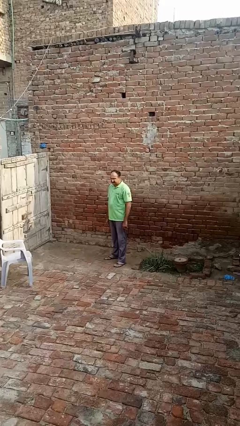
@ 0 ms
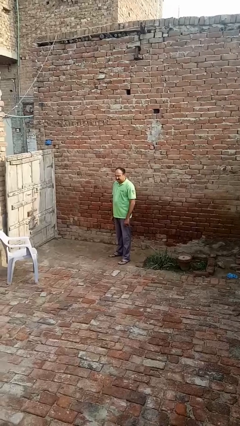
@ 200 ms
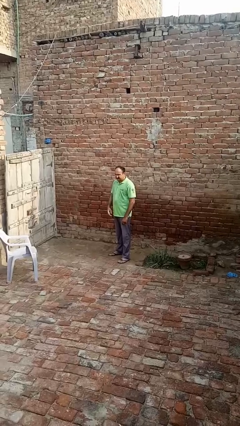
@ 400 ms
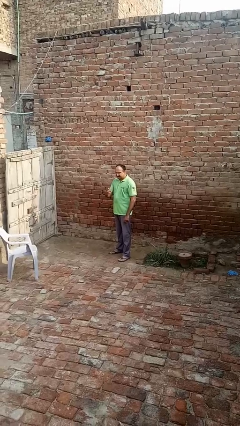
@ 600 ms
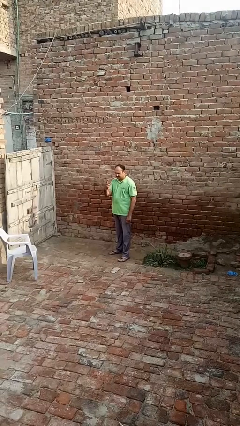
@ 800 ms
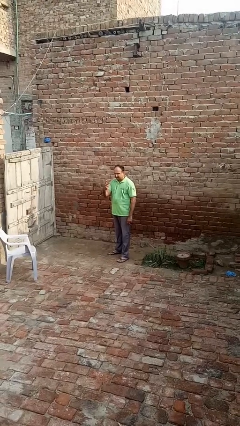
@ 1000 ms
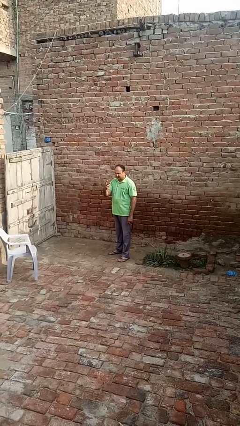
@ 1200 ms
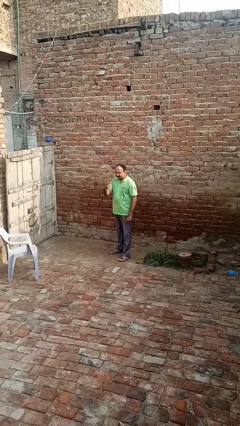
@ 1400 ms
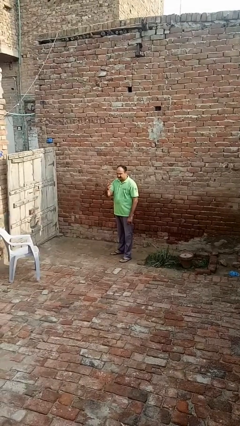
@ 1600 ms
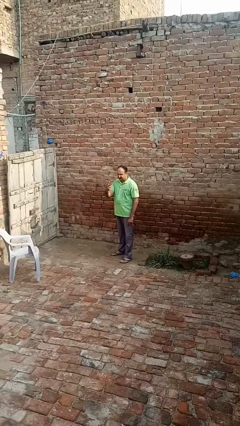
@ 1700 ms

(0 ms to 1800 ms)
person gestures peace

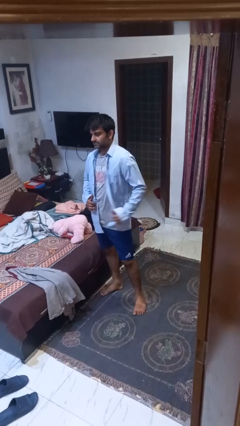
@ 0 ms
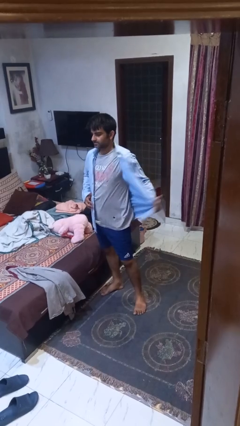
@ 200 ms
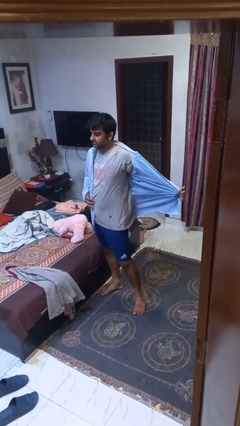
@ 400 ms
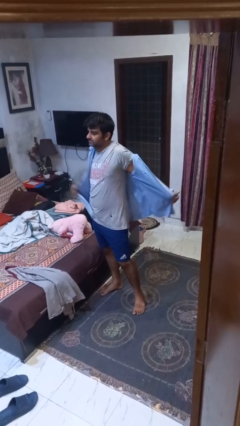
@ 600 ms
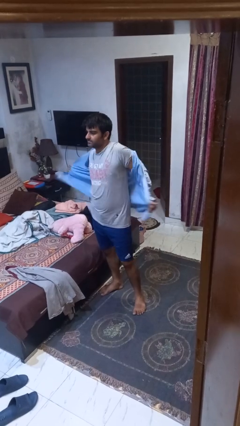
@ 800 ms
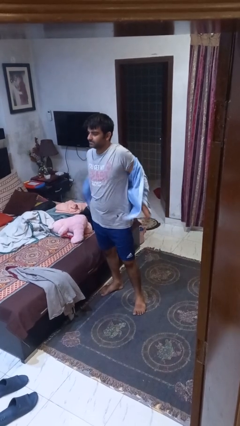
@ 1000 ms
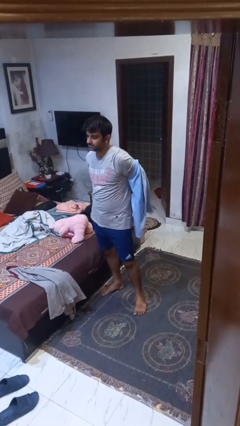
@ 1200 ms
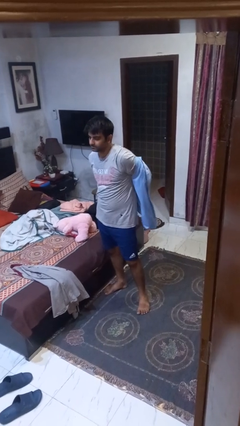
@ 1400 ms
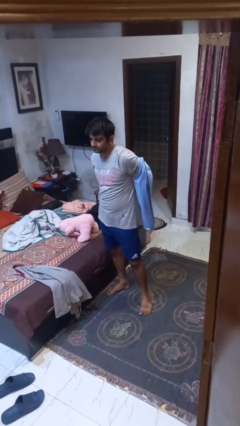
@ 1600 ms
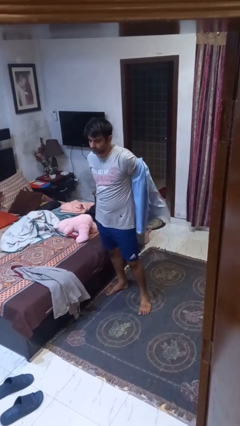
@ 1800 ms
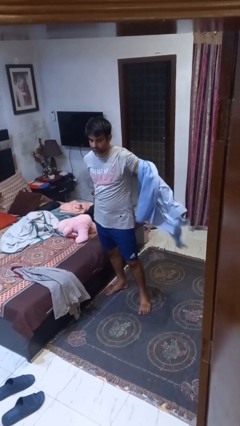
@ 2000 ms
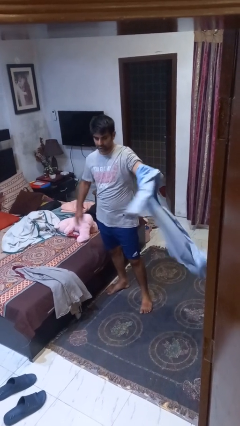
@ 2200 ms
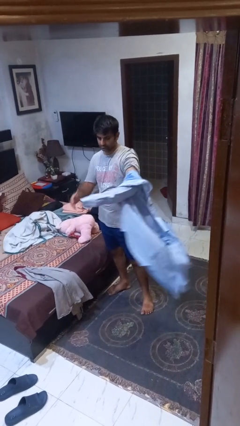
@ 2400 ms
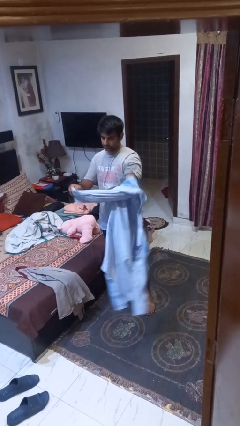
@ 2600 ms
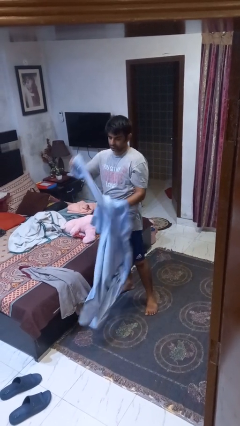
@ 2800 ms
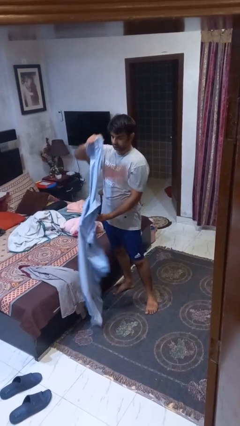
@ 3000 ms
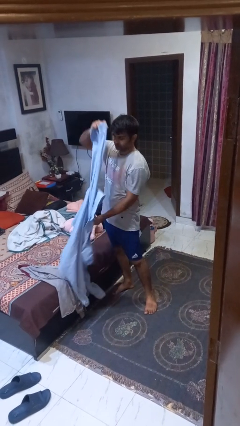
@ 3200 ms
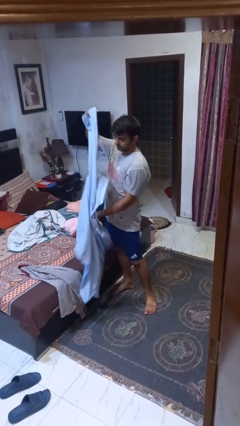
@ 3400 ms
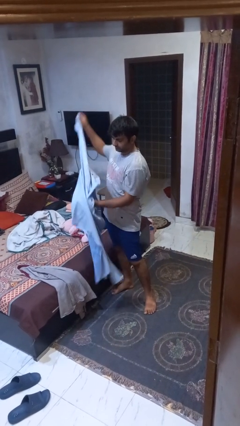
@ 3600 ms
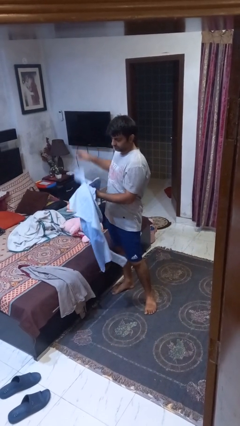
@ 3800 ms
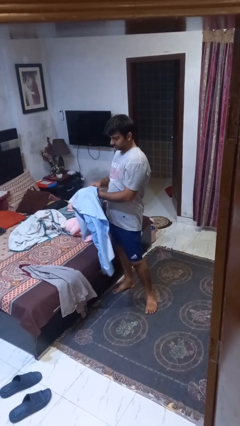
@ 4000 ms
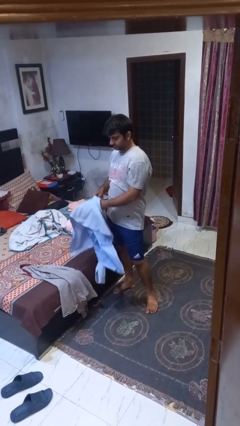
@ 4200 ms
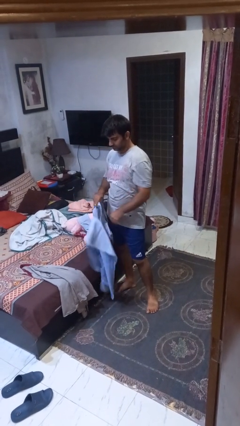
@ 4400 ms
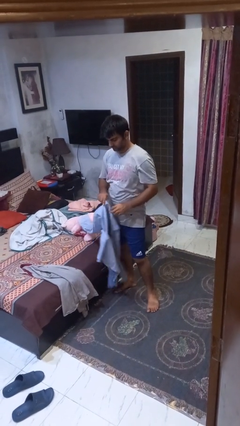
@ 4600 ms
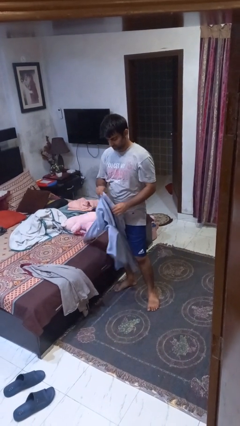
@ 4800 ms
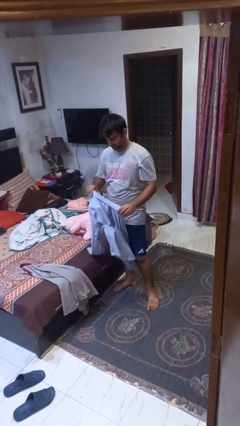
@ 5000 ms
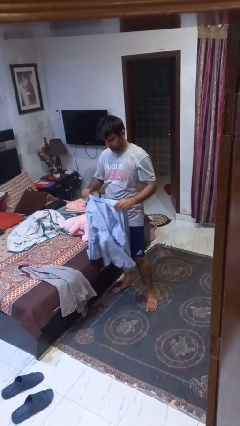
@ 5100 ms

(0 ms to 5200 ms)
person takes off shirt

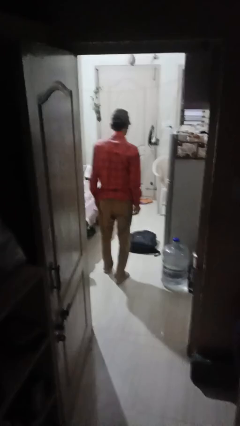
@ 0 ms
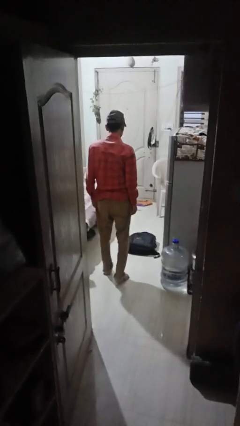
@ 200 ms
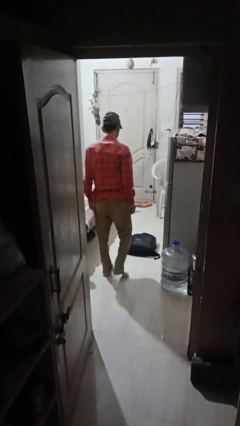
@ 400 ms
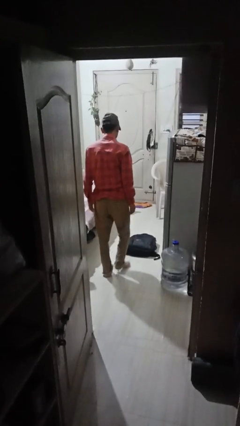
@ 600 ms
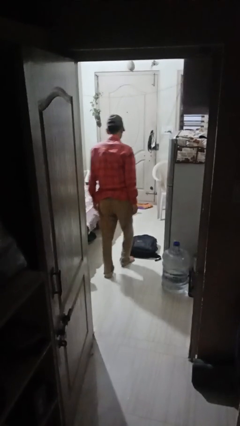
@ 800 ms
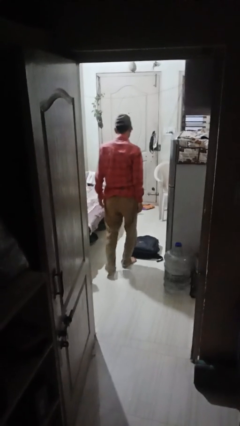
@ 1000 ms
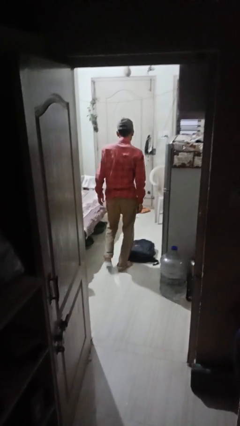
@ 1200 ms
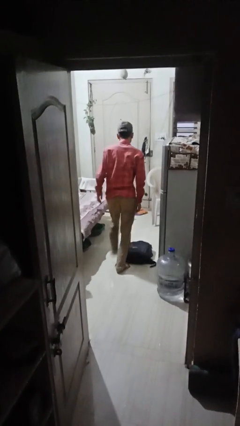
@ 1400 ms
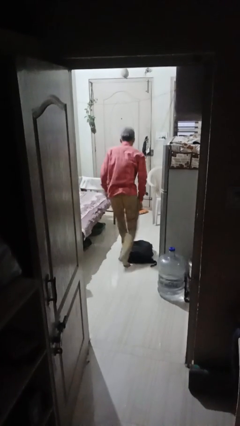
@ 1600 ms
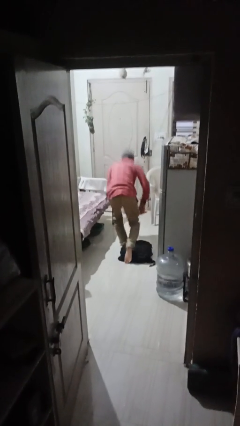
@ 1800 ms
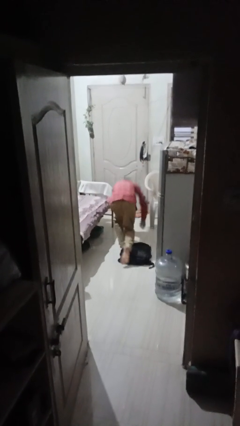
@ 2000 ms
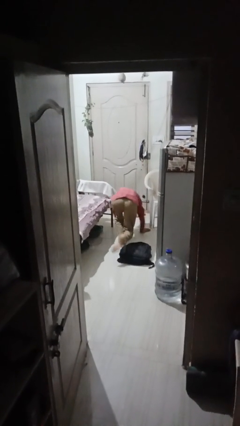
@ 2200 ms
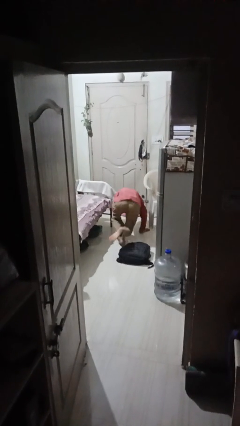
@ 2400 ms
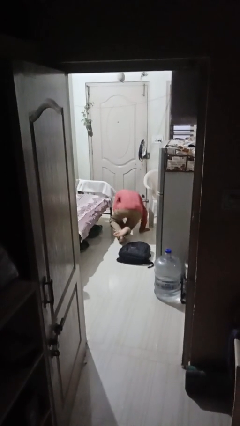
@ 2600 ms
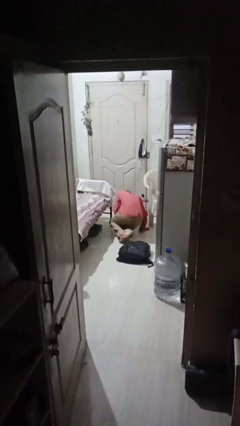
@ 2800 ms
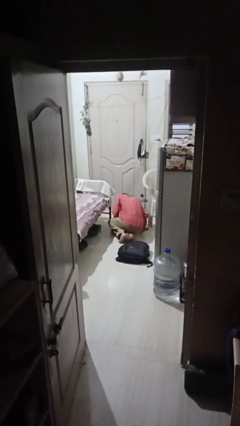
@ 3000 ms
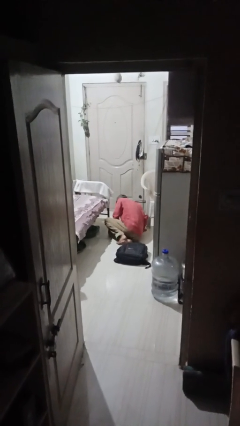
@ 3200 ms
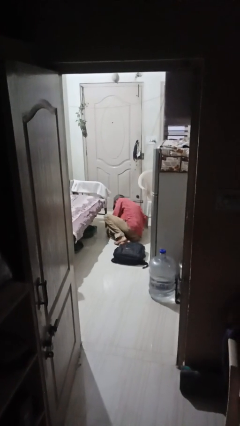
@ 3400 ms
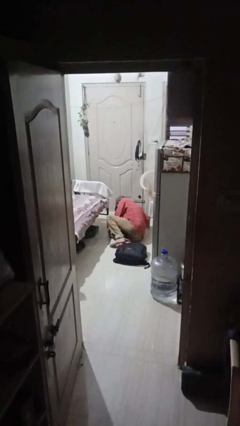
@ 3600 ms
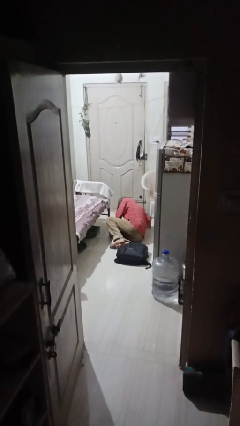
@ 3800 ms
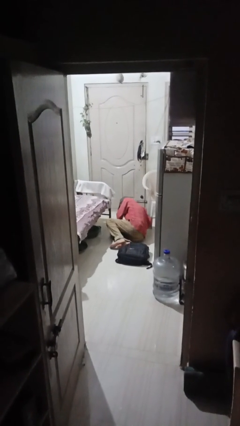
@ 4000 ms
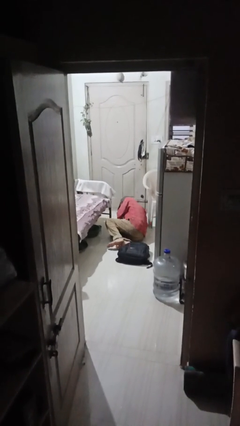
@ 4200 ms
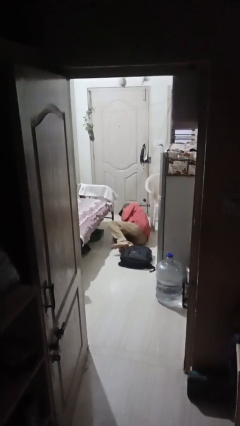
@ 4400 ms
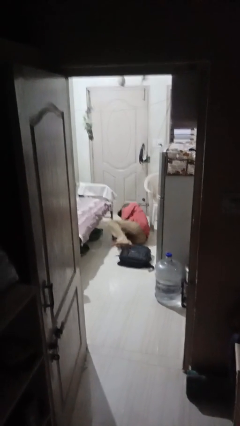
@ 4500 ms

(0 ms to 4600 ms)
person trips on object on floor

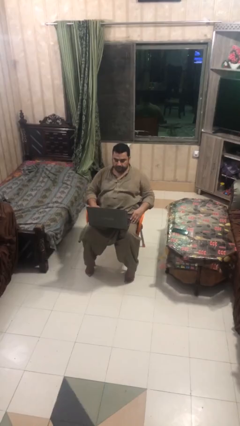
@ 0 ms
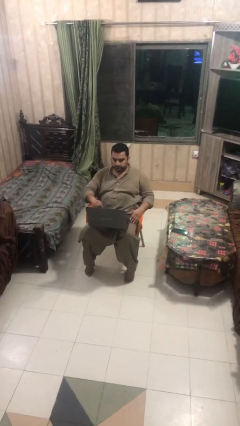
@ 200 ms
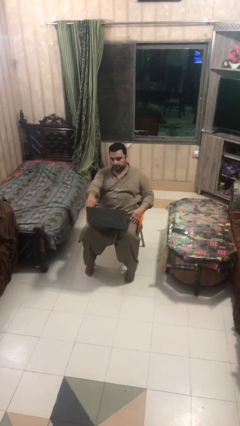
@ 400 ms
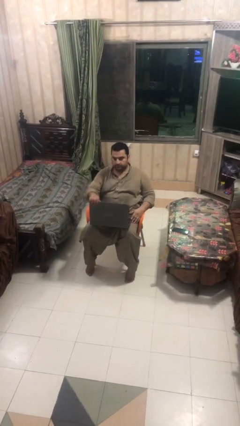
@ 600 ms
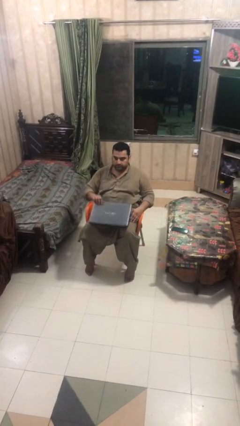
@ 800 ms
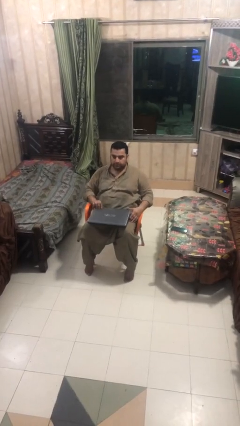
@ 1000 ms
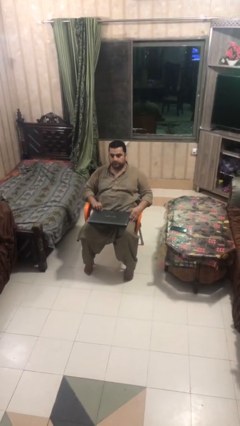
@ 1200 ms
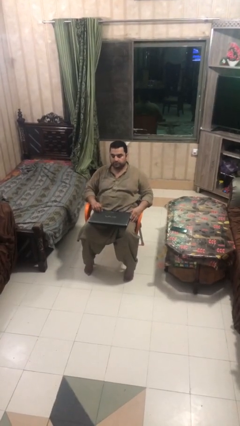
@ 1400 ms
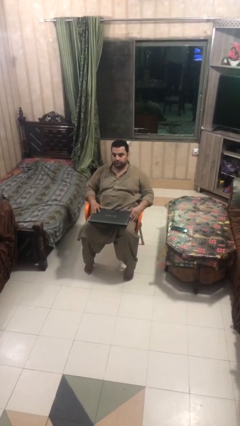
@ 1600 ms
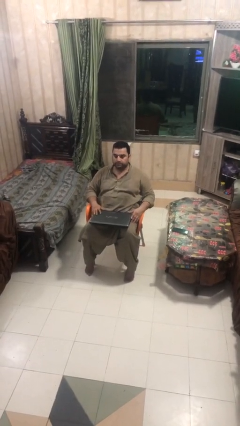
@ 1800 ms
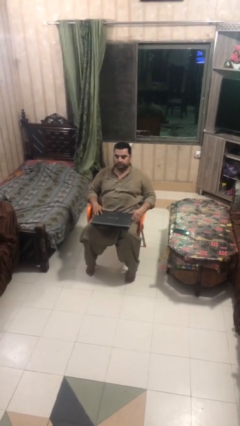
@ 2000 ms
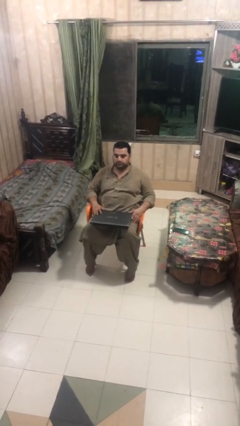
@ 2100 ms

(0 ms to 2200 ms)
person closes laptop

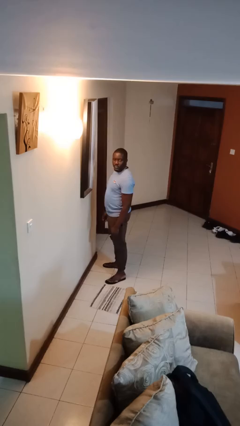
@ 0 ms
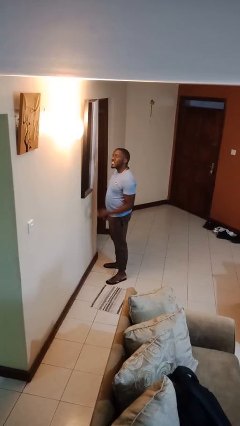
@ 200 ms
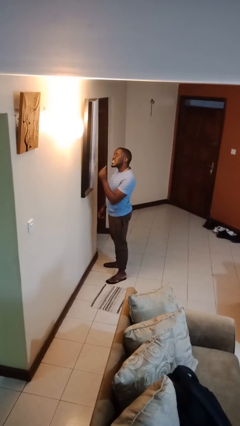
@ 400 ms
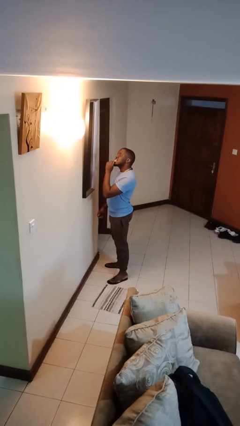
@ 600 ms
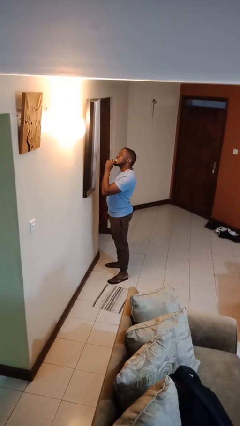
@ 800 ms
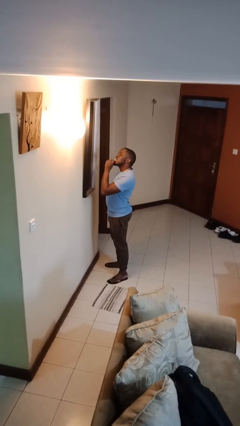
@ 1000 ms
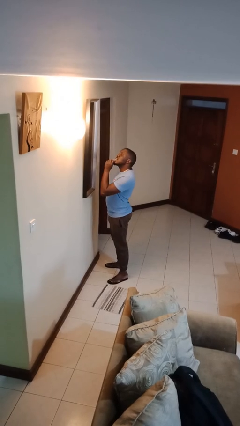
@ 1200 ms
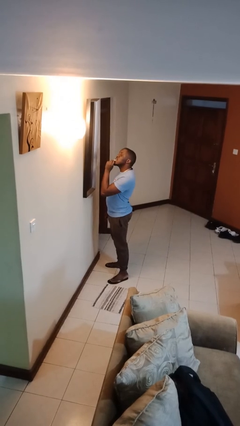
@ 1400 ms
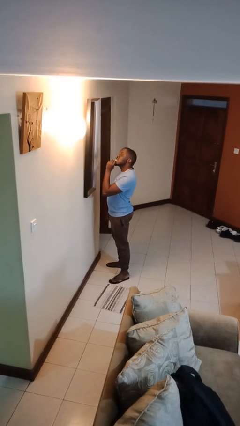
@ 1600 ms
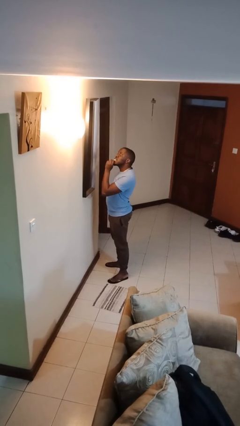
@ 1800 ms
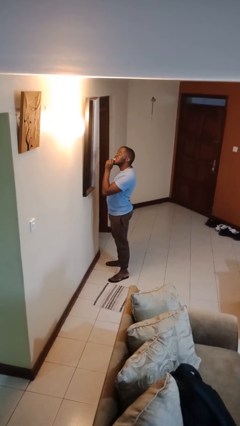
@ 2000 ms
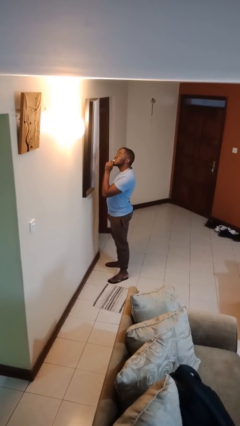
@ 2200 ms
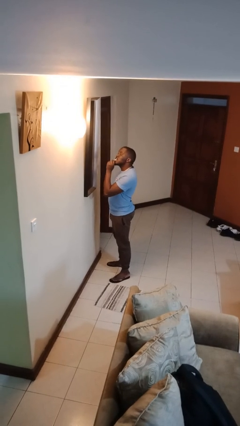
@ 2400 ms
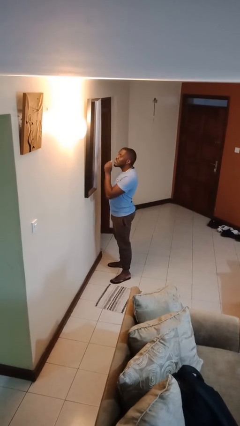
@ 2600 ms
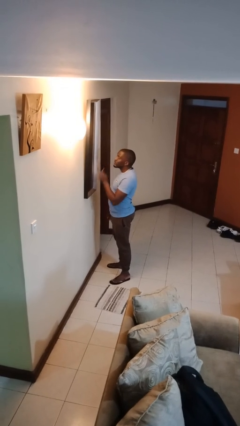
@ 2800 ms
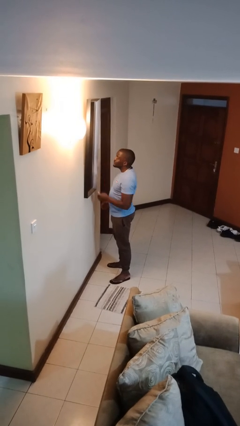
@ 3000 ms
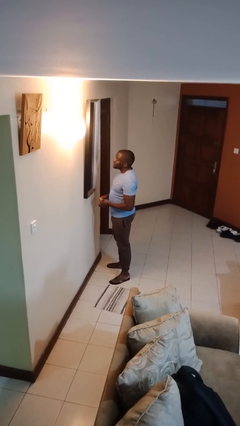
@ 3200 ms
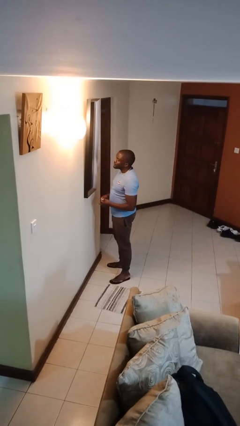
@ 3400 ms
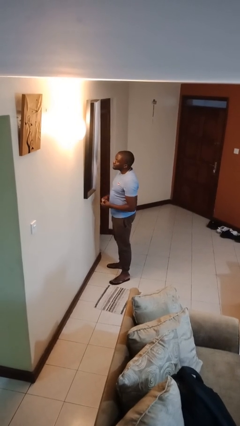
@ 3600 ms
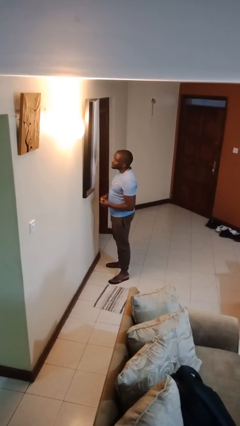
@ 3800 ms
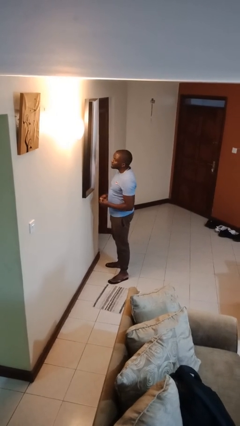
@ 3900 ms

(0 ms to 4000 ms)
person flosses
